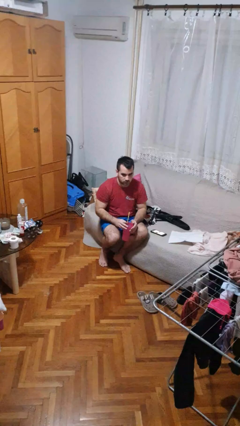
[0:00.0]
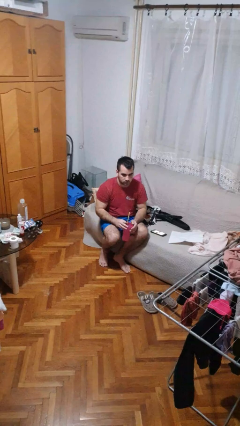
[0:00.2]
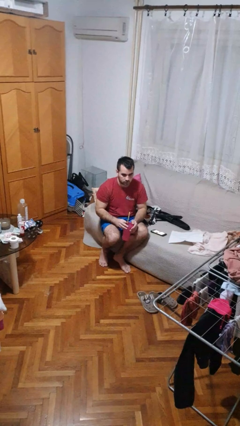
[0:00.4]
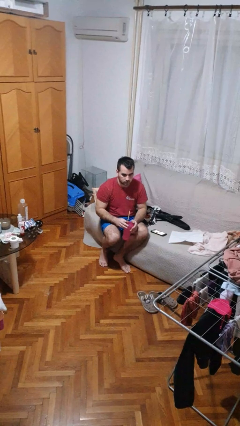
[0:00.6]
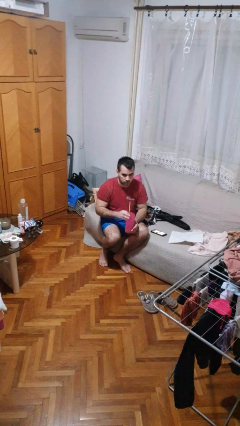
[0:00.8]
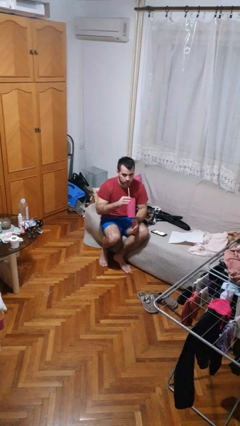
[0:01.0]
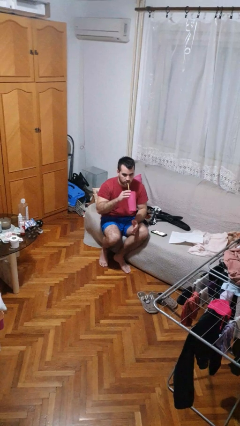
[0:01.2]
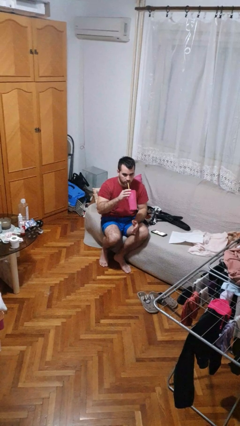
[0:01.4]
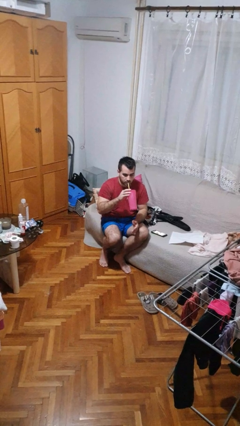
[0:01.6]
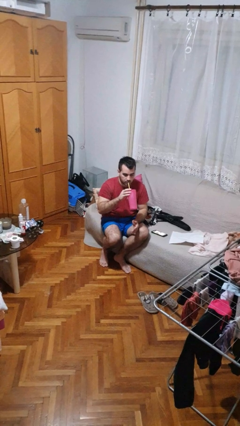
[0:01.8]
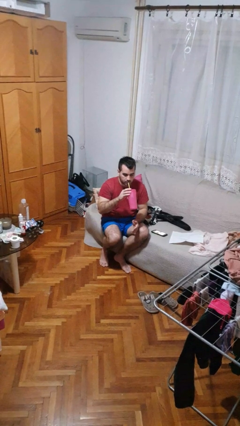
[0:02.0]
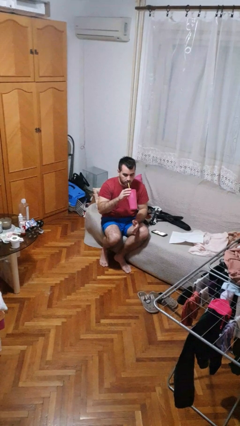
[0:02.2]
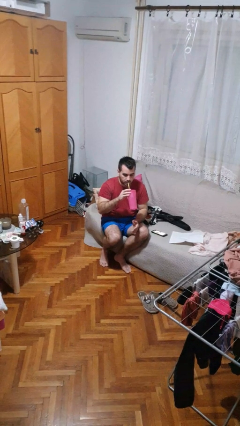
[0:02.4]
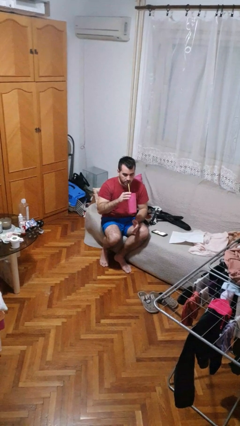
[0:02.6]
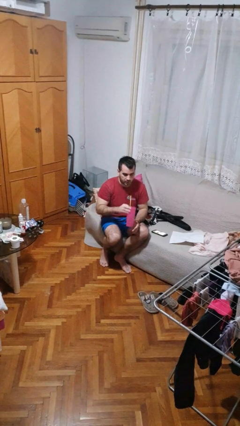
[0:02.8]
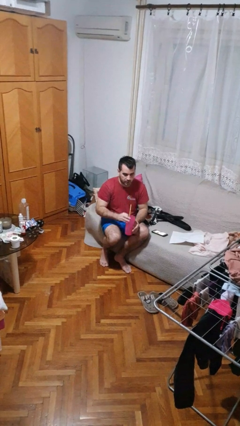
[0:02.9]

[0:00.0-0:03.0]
person drinks from straw

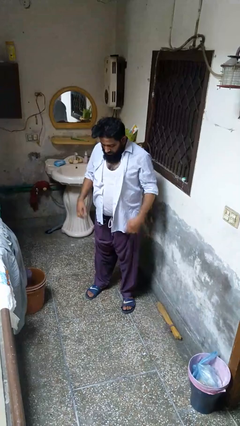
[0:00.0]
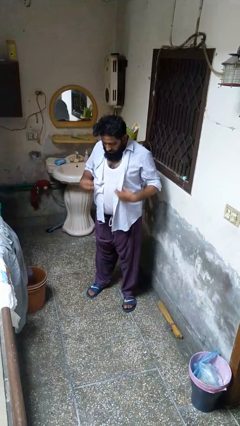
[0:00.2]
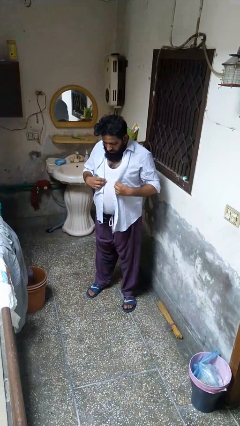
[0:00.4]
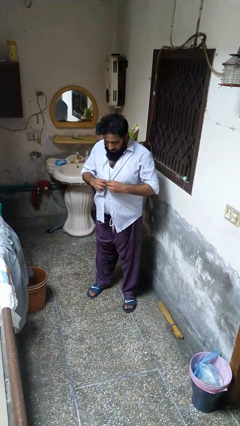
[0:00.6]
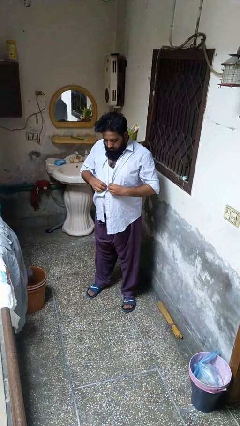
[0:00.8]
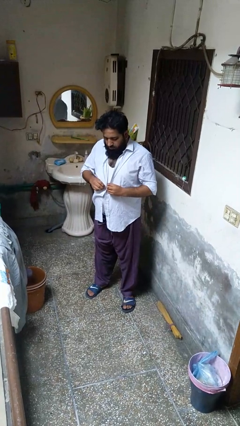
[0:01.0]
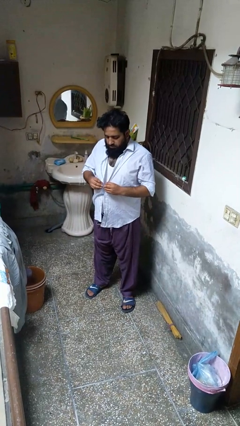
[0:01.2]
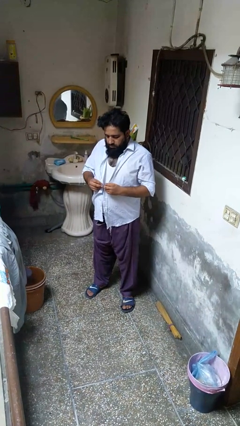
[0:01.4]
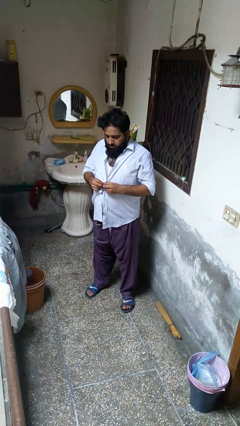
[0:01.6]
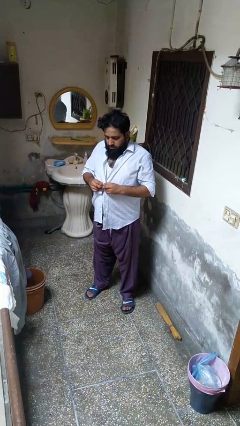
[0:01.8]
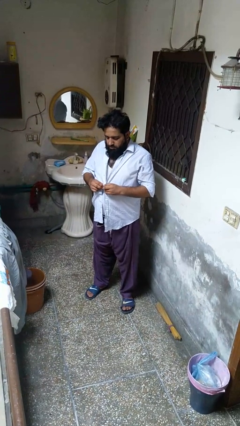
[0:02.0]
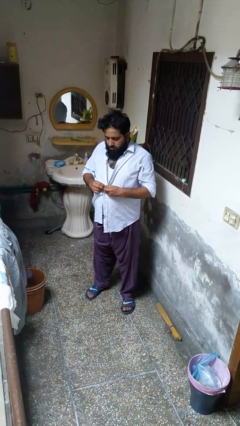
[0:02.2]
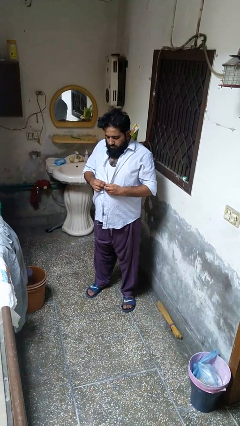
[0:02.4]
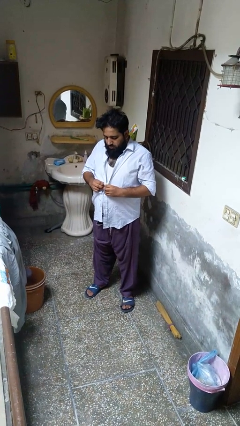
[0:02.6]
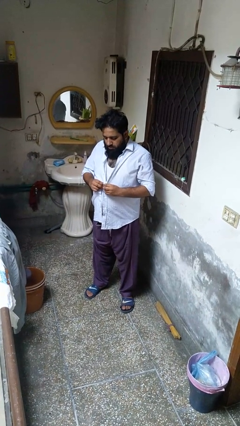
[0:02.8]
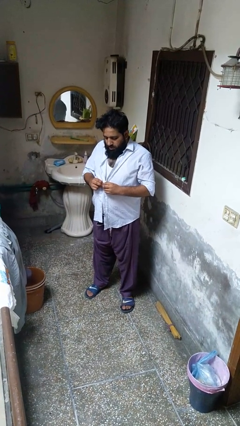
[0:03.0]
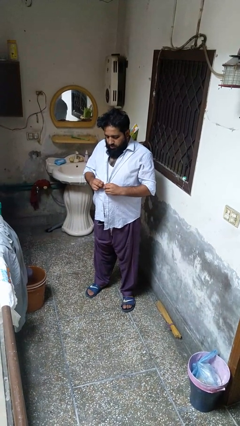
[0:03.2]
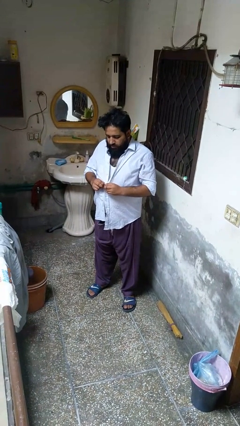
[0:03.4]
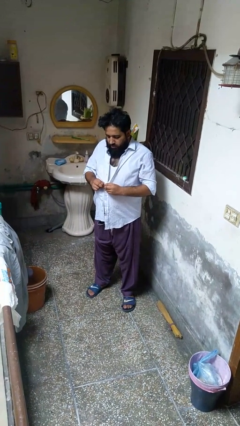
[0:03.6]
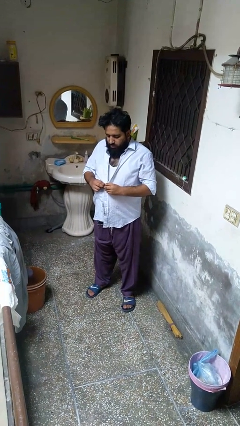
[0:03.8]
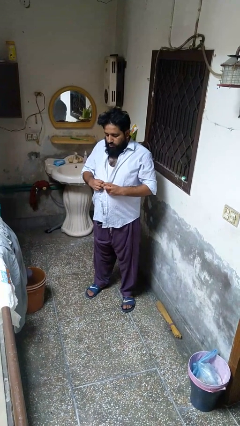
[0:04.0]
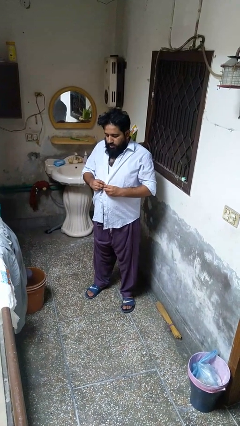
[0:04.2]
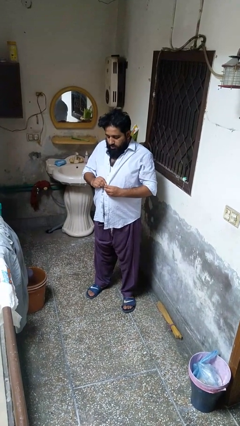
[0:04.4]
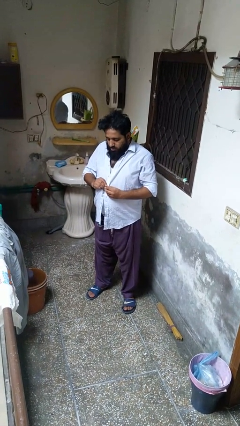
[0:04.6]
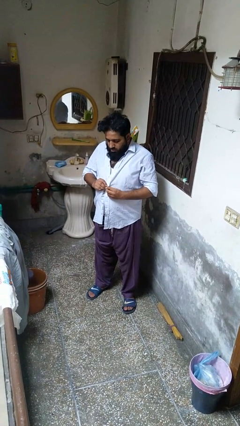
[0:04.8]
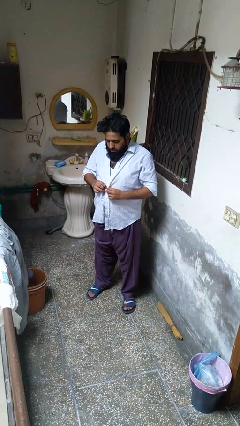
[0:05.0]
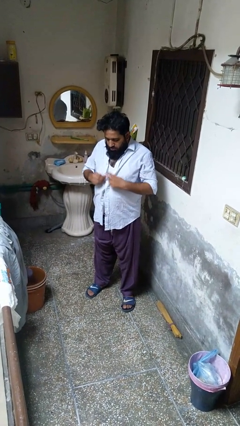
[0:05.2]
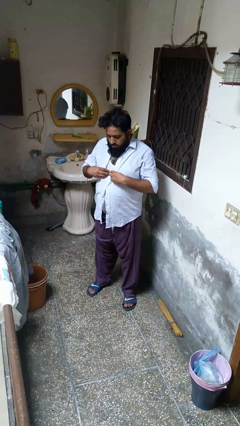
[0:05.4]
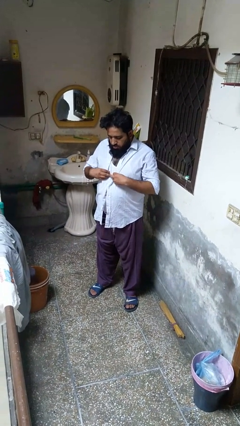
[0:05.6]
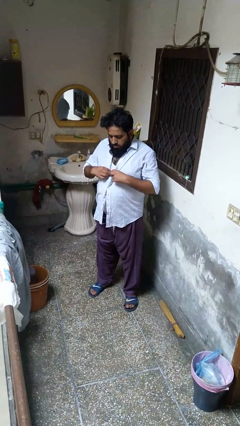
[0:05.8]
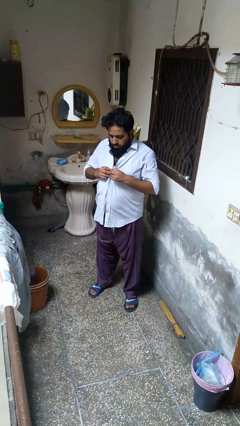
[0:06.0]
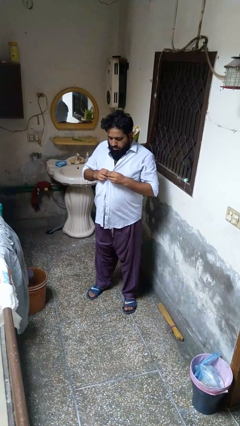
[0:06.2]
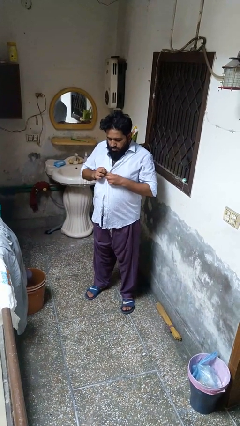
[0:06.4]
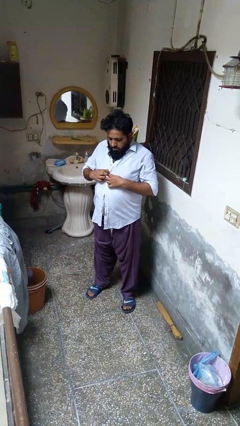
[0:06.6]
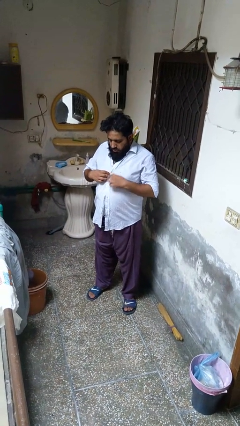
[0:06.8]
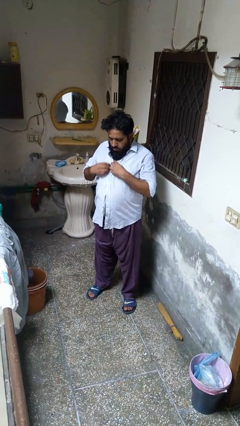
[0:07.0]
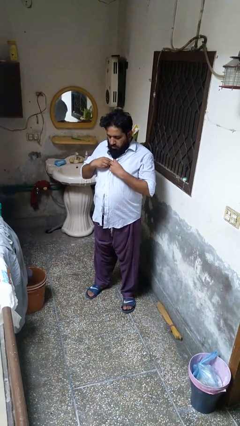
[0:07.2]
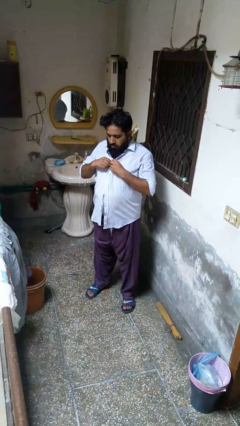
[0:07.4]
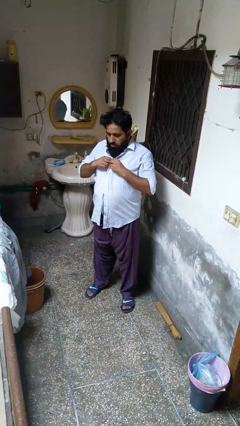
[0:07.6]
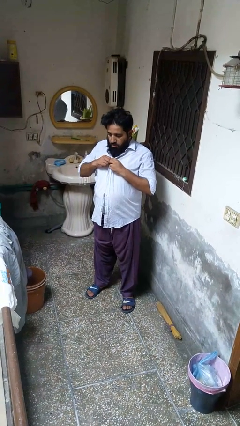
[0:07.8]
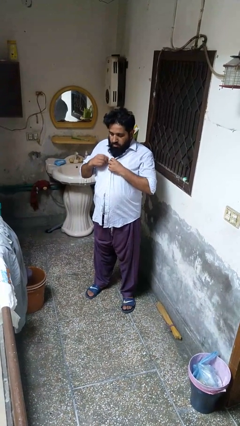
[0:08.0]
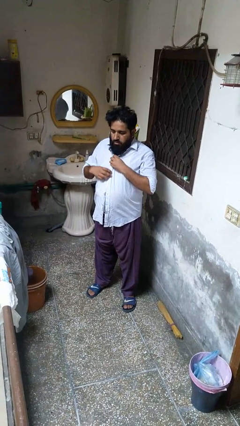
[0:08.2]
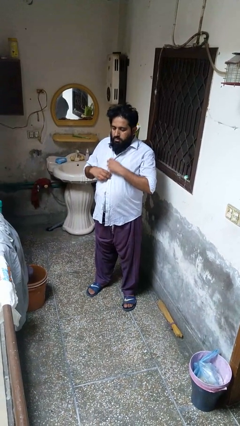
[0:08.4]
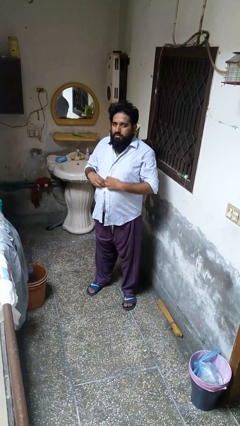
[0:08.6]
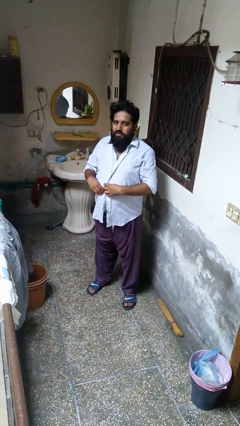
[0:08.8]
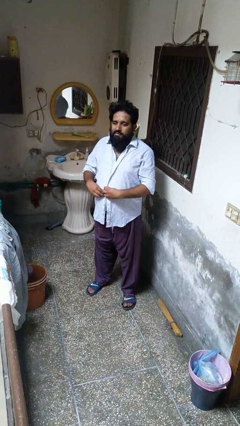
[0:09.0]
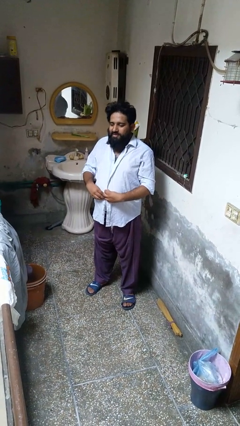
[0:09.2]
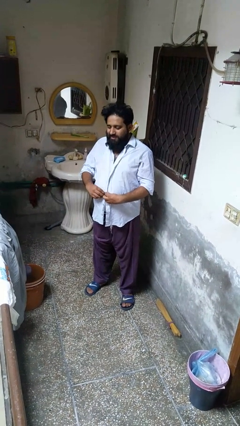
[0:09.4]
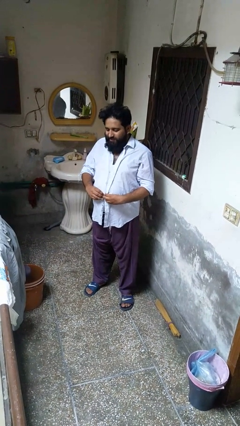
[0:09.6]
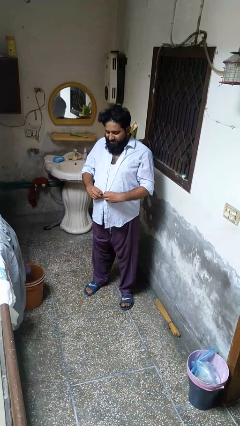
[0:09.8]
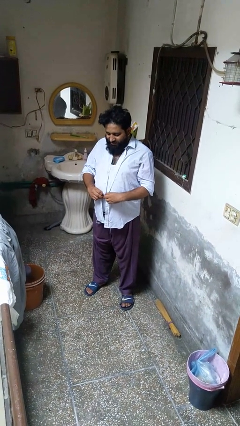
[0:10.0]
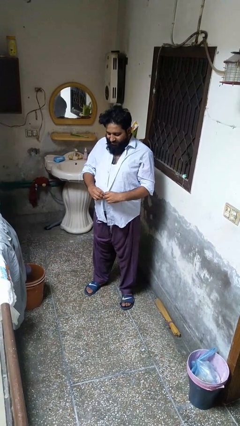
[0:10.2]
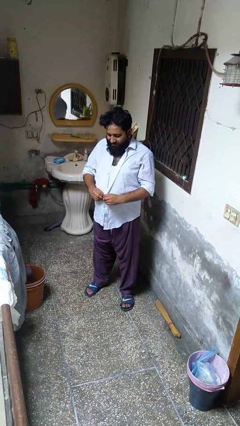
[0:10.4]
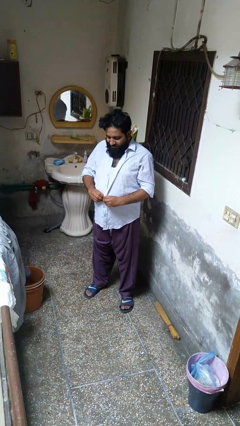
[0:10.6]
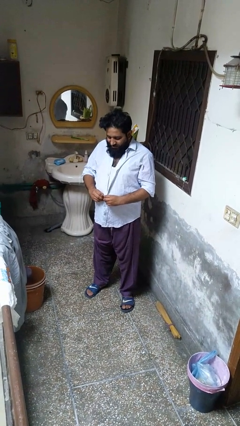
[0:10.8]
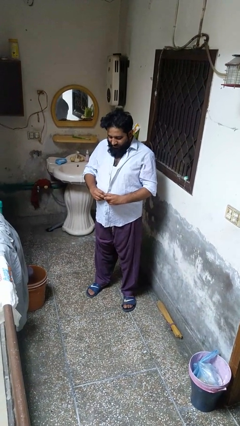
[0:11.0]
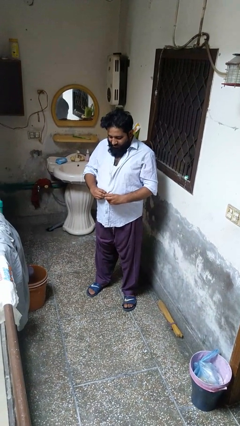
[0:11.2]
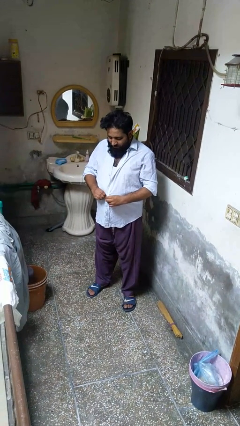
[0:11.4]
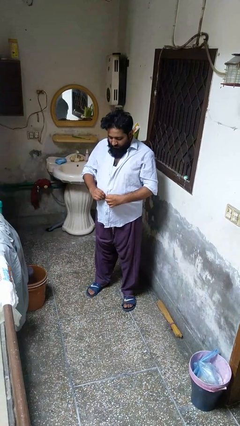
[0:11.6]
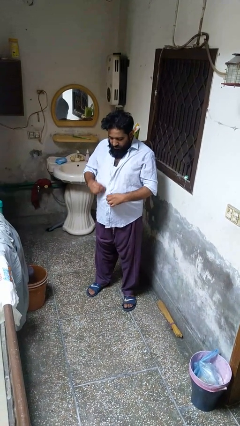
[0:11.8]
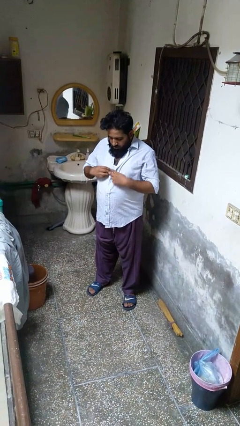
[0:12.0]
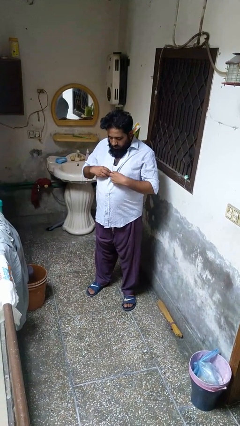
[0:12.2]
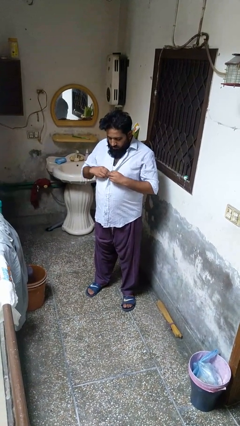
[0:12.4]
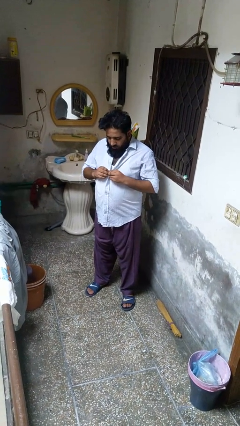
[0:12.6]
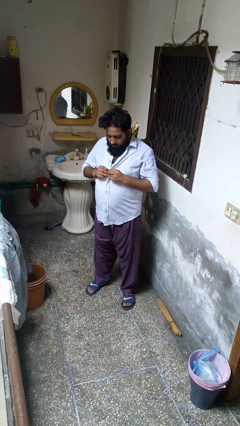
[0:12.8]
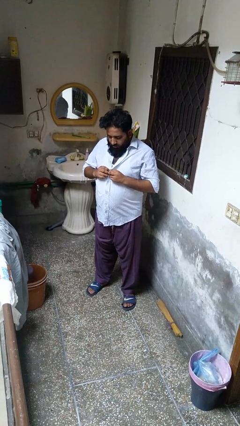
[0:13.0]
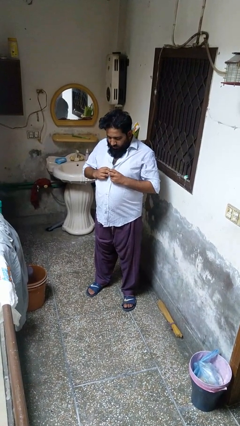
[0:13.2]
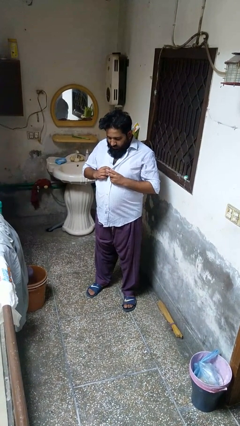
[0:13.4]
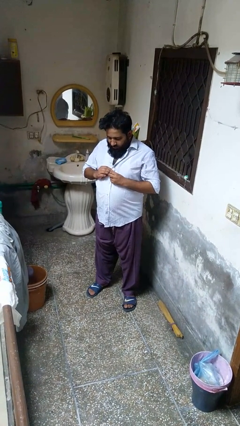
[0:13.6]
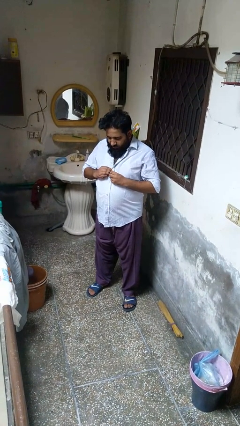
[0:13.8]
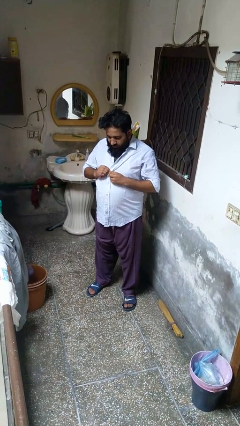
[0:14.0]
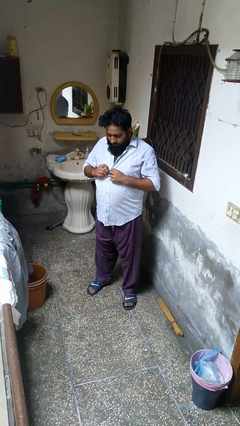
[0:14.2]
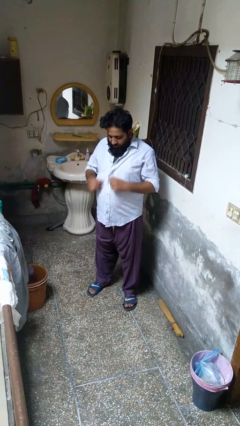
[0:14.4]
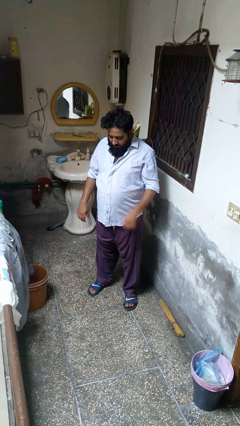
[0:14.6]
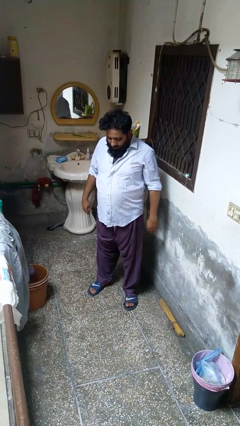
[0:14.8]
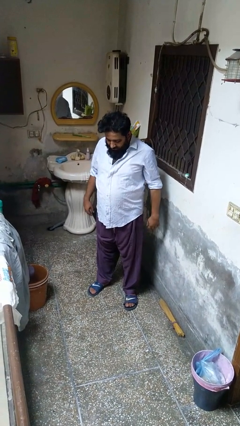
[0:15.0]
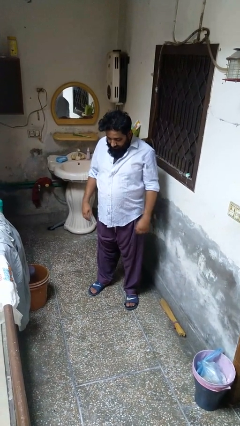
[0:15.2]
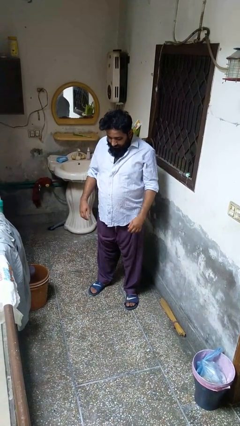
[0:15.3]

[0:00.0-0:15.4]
person buttons shirt
